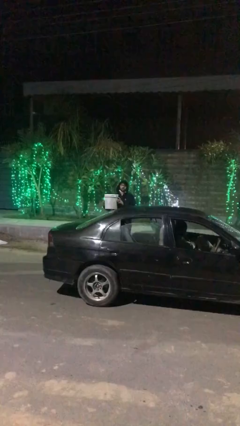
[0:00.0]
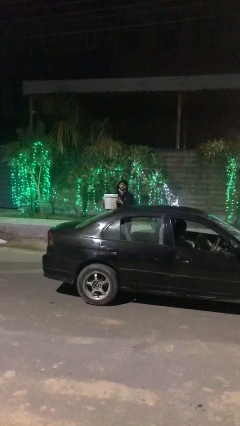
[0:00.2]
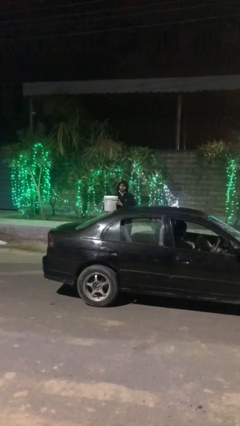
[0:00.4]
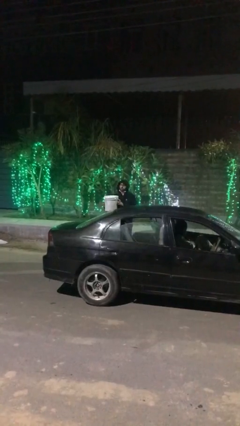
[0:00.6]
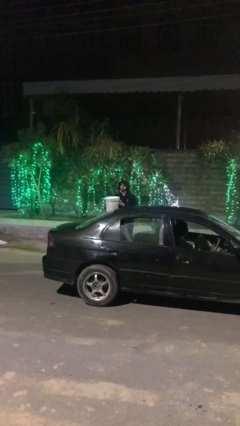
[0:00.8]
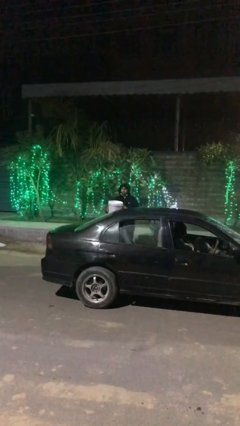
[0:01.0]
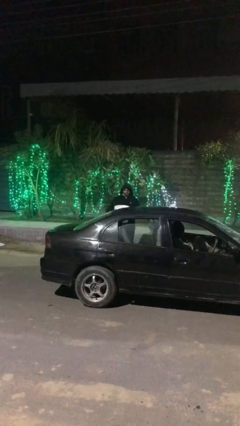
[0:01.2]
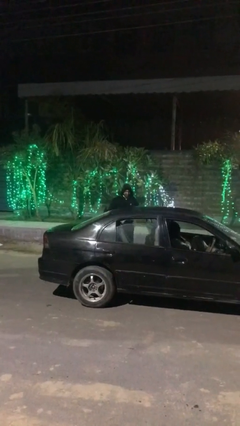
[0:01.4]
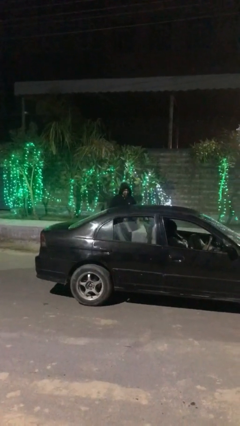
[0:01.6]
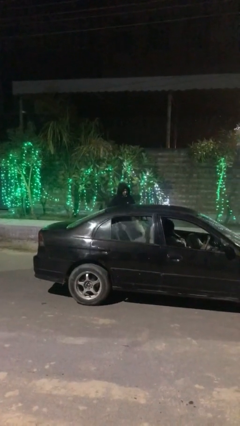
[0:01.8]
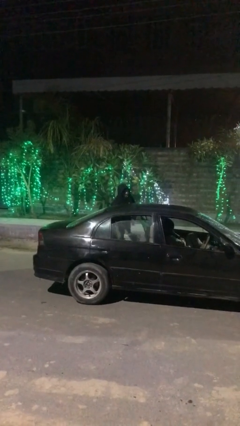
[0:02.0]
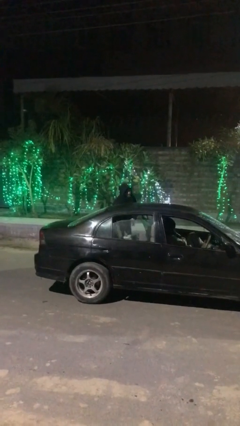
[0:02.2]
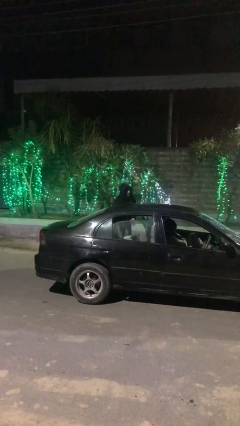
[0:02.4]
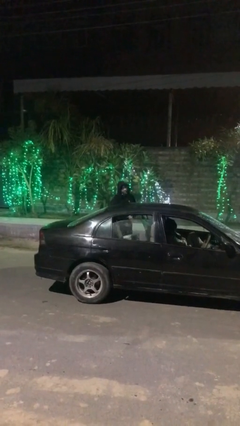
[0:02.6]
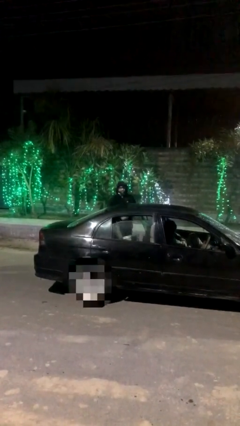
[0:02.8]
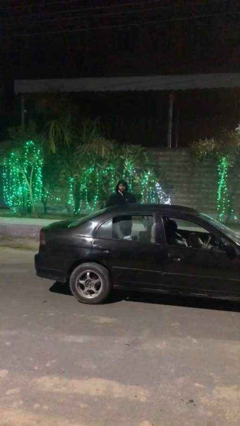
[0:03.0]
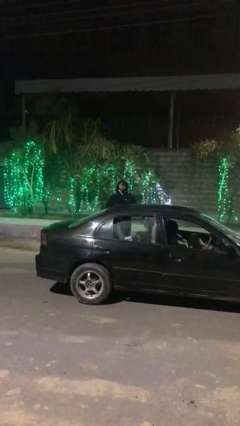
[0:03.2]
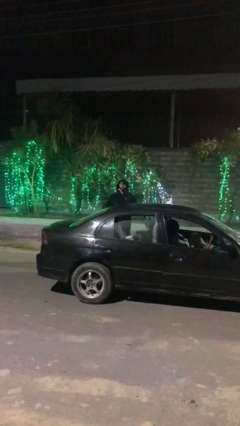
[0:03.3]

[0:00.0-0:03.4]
person loads car

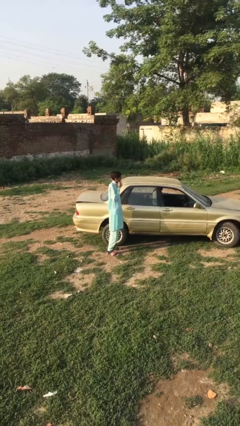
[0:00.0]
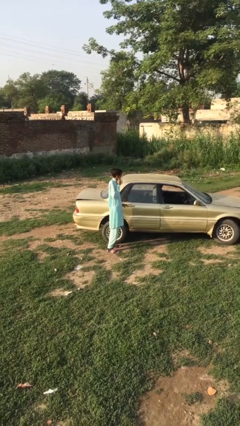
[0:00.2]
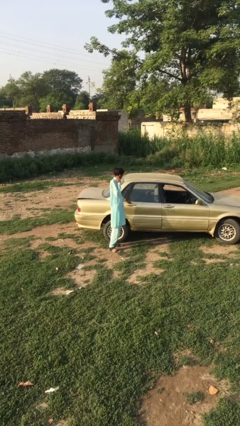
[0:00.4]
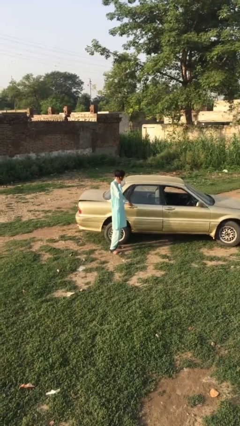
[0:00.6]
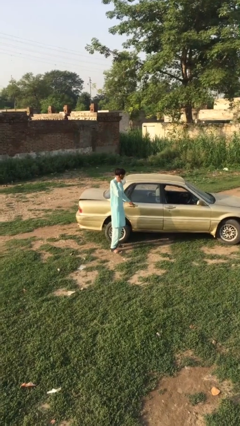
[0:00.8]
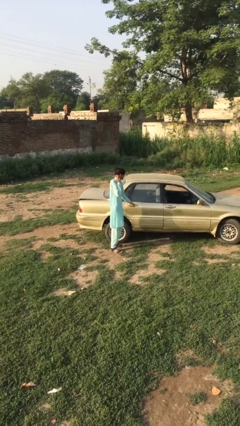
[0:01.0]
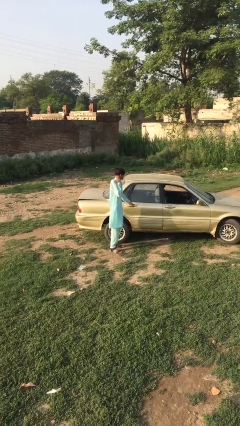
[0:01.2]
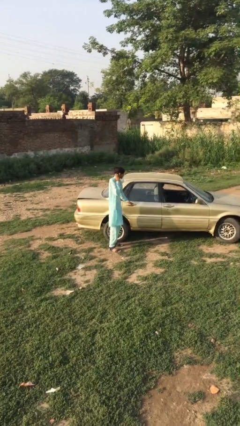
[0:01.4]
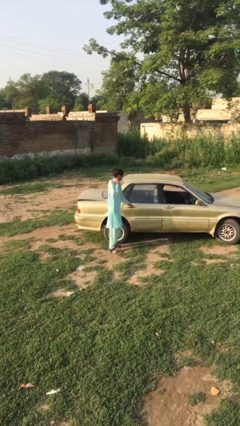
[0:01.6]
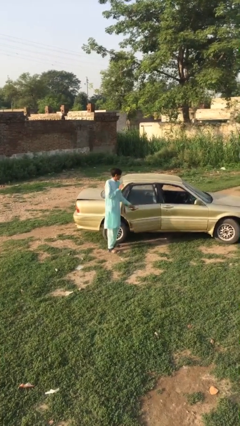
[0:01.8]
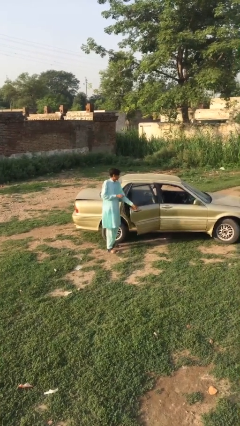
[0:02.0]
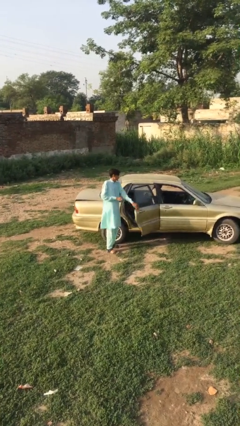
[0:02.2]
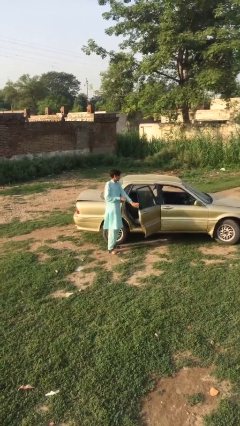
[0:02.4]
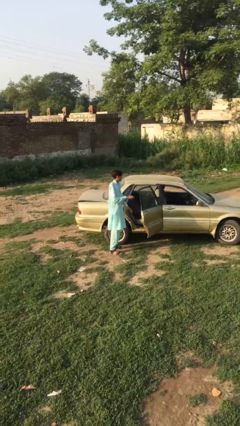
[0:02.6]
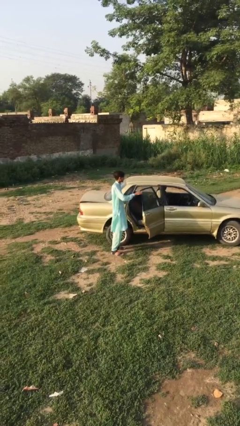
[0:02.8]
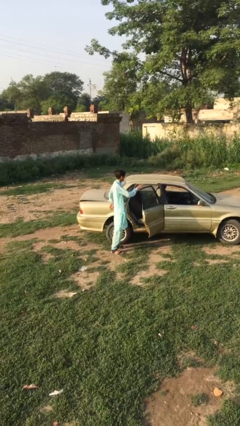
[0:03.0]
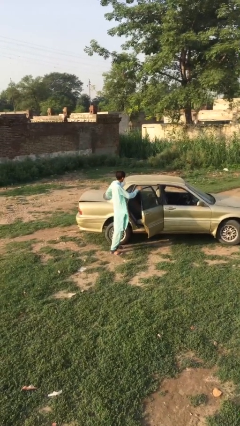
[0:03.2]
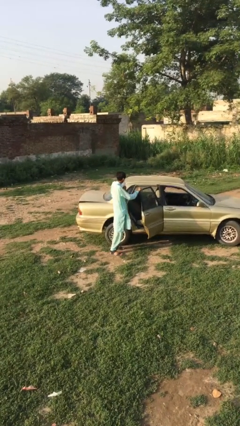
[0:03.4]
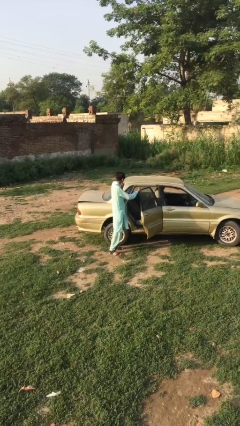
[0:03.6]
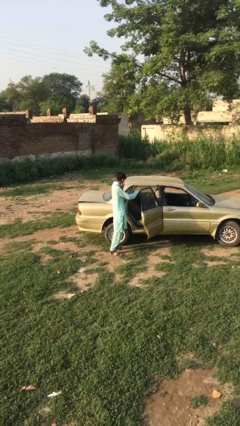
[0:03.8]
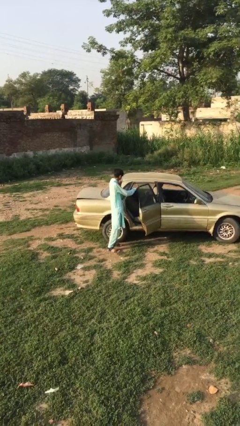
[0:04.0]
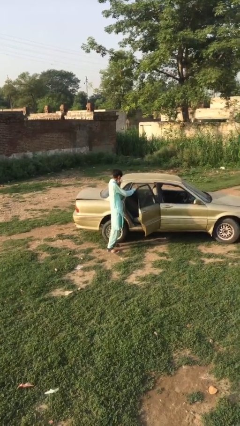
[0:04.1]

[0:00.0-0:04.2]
person opens car door

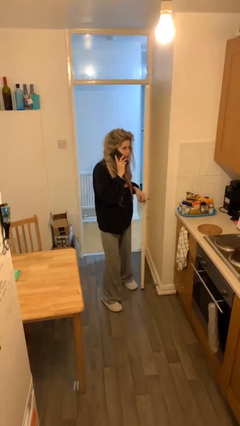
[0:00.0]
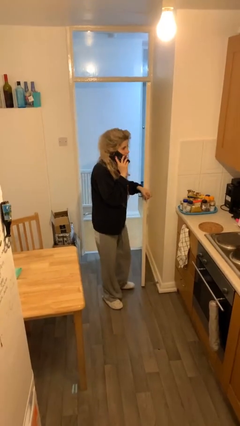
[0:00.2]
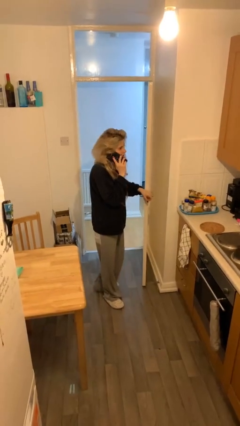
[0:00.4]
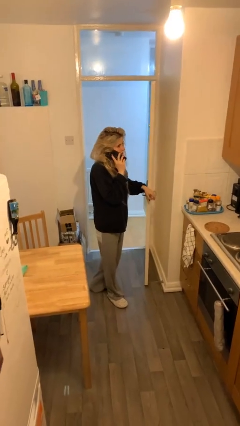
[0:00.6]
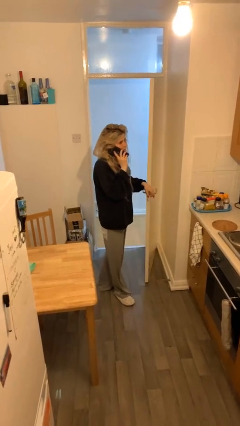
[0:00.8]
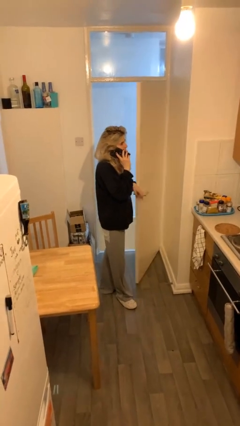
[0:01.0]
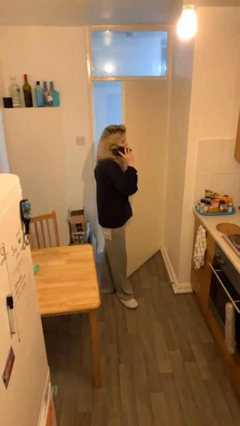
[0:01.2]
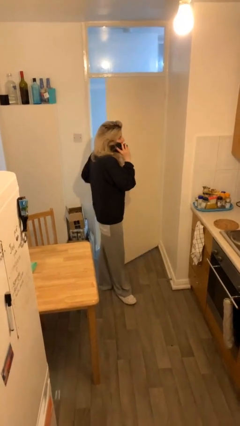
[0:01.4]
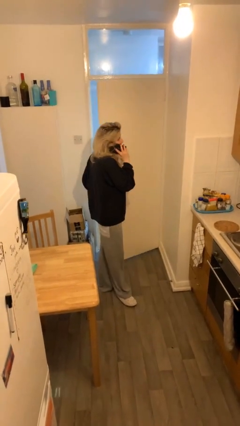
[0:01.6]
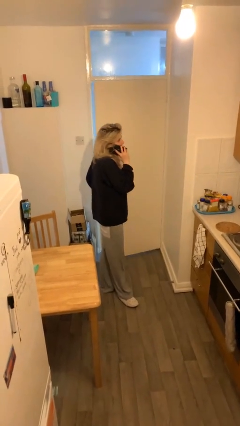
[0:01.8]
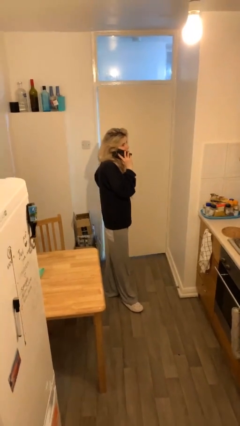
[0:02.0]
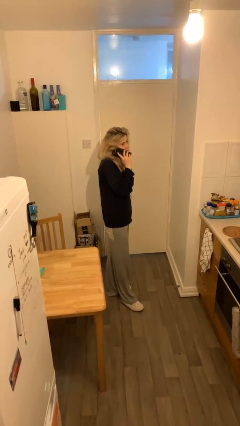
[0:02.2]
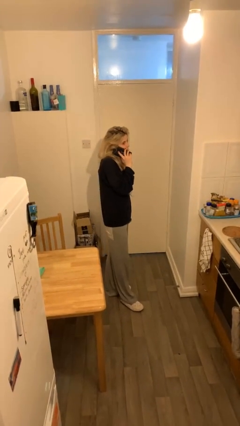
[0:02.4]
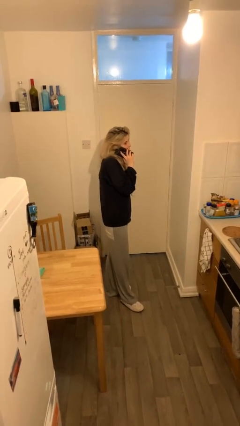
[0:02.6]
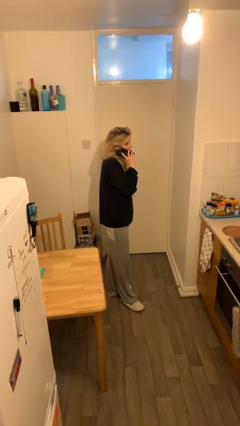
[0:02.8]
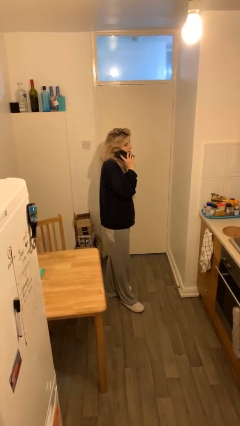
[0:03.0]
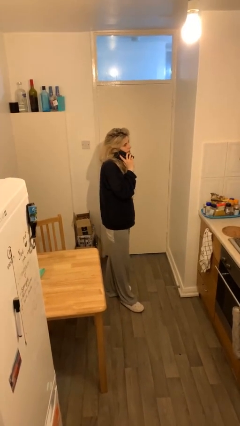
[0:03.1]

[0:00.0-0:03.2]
person closes facility door

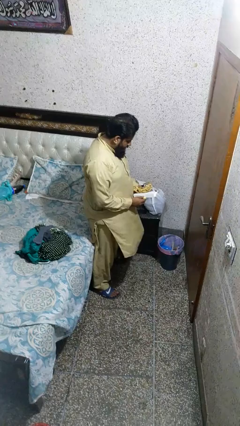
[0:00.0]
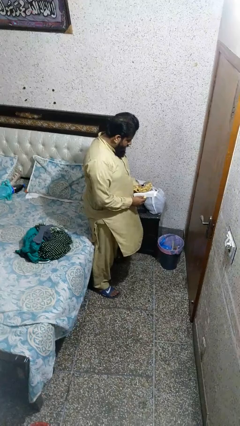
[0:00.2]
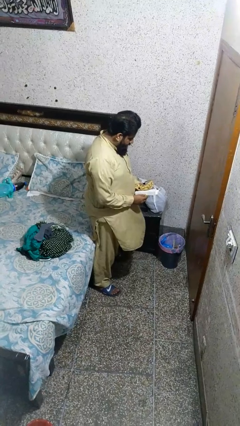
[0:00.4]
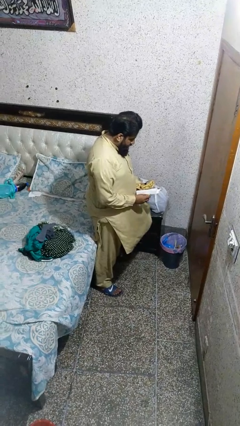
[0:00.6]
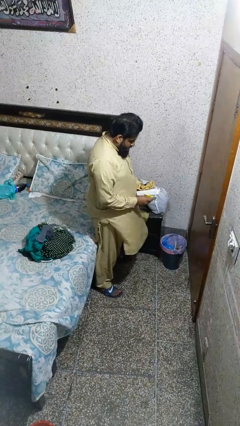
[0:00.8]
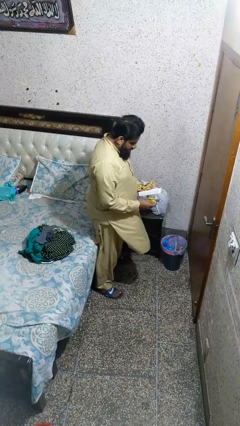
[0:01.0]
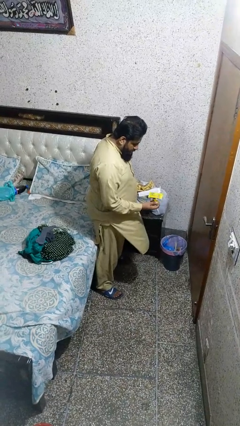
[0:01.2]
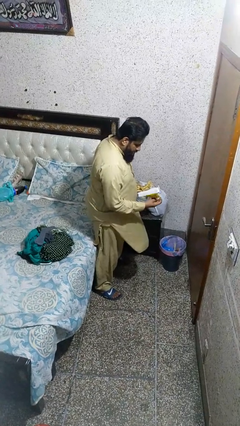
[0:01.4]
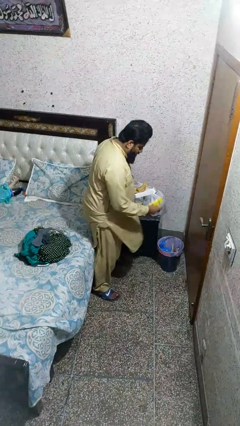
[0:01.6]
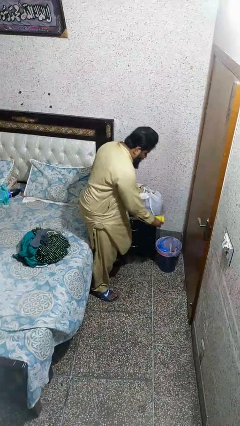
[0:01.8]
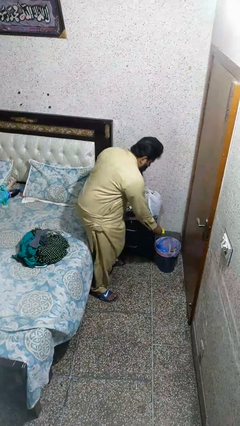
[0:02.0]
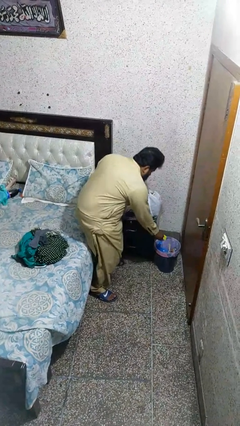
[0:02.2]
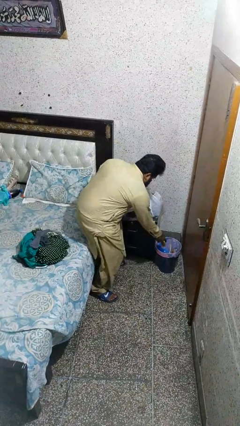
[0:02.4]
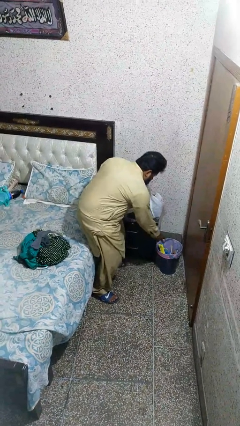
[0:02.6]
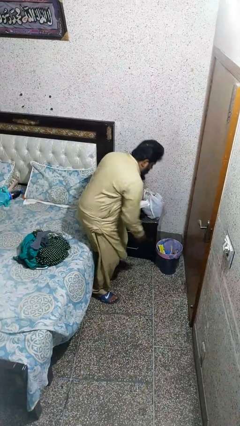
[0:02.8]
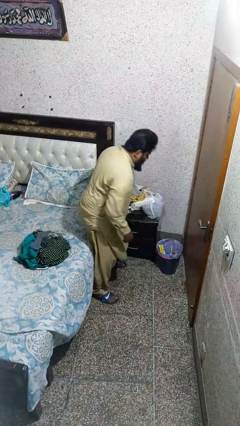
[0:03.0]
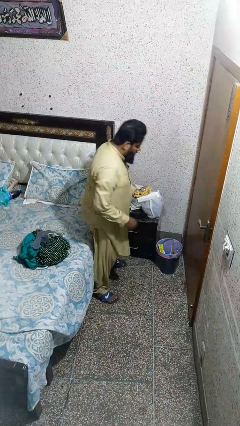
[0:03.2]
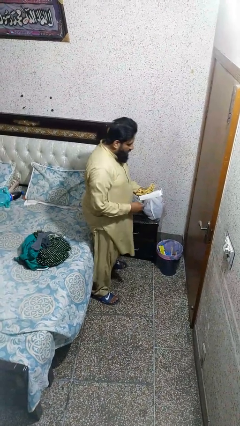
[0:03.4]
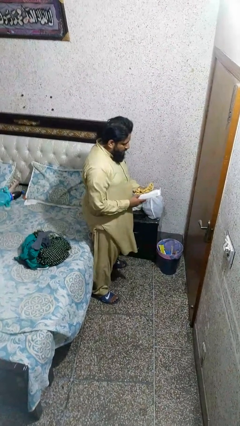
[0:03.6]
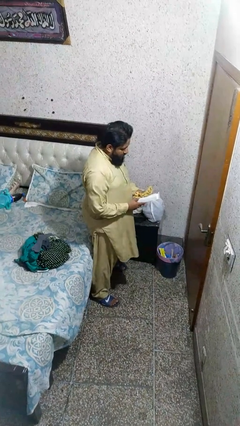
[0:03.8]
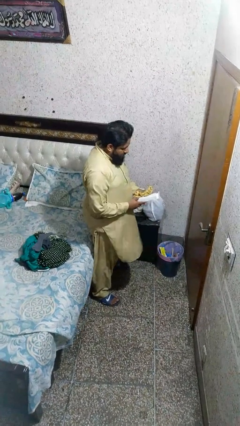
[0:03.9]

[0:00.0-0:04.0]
person discards trash

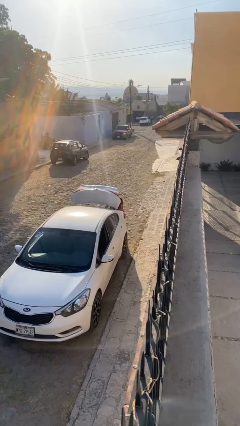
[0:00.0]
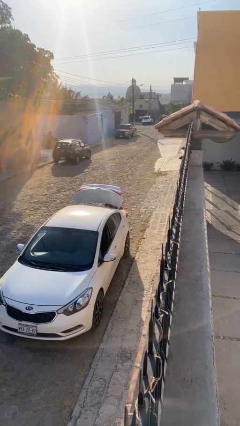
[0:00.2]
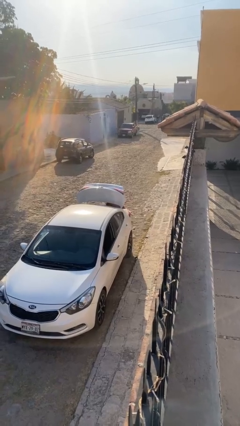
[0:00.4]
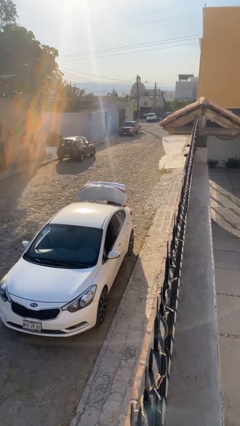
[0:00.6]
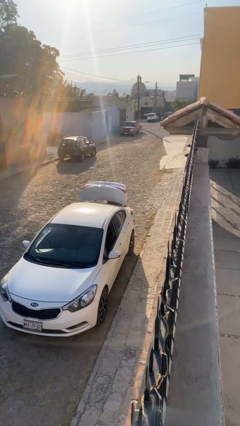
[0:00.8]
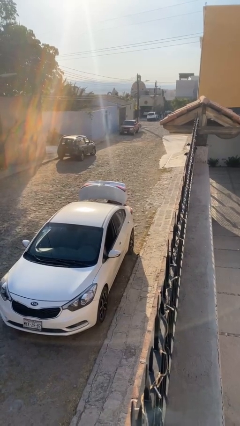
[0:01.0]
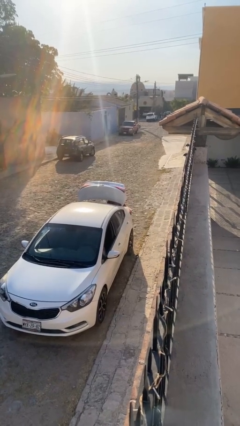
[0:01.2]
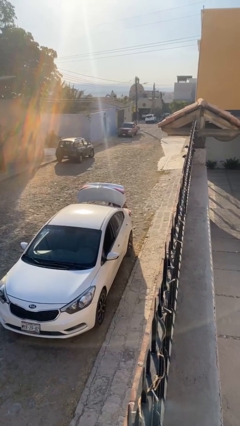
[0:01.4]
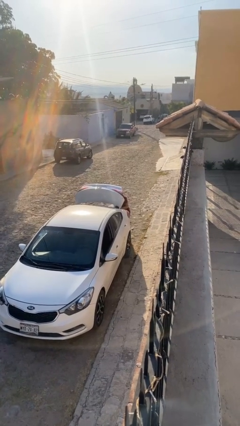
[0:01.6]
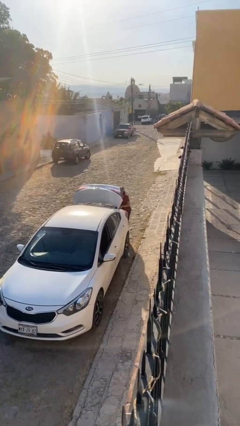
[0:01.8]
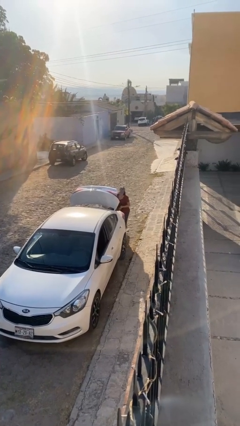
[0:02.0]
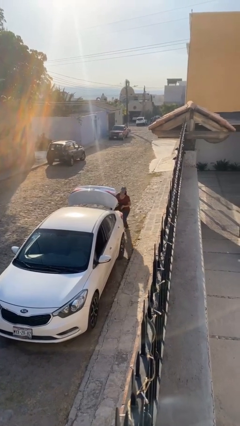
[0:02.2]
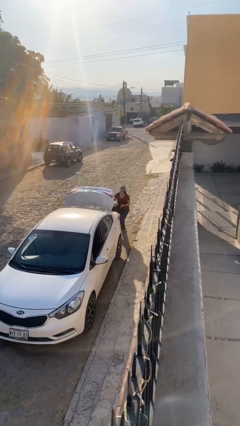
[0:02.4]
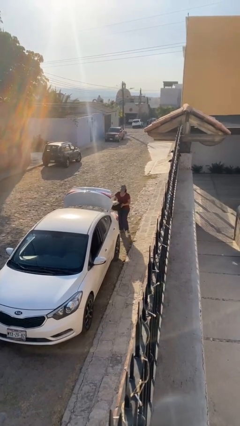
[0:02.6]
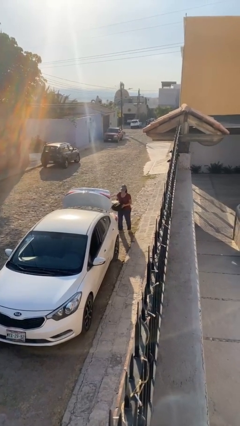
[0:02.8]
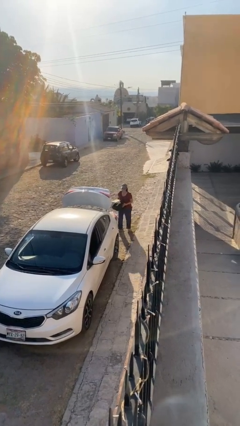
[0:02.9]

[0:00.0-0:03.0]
person unloads car

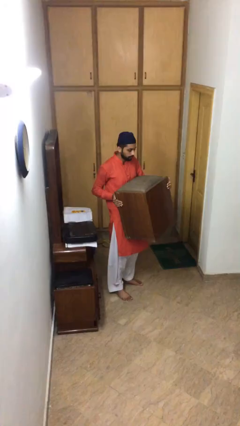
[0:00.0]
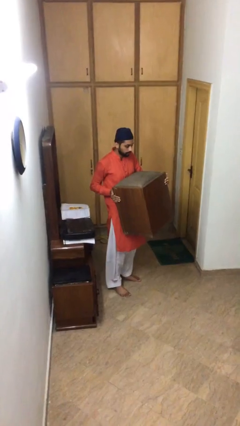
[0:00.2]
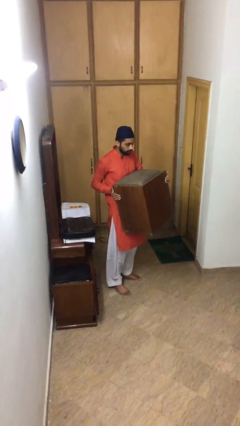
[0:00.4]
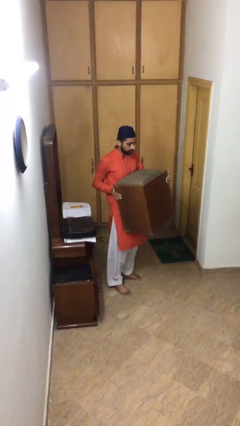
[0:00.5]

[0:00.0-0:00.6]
person carries heavy object
